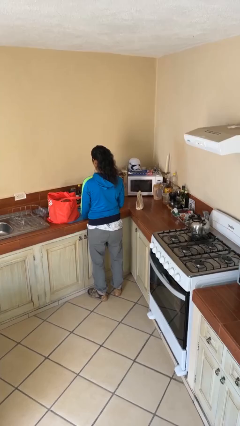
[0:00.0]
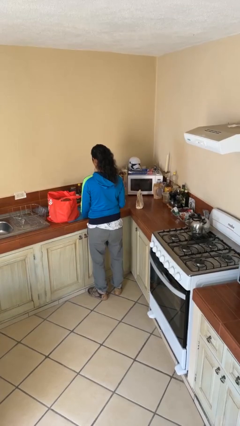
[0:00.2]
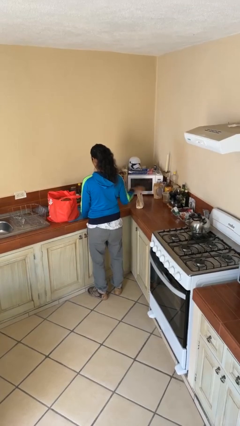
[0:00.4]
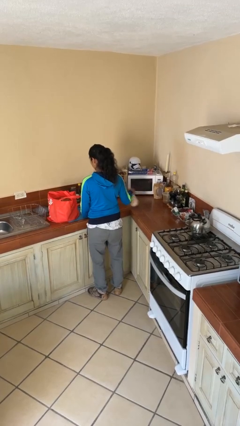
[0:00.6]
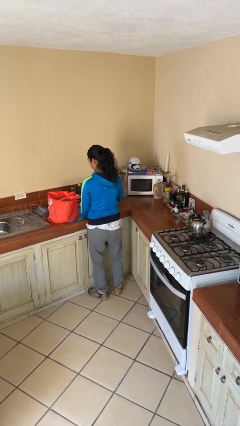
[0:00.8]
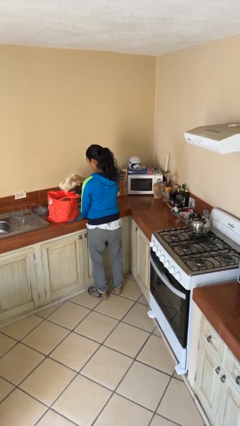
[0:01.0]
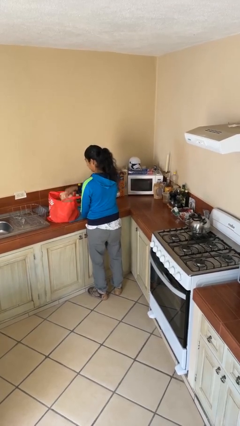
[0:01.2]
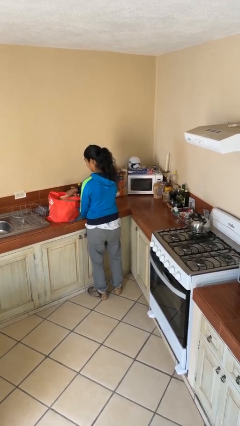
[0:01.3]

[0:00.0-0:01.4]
person puts object into bag

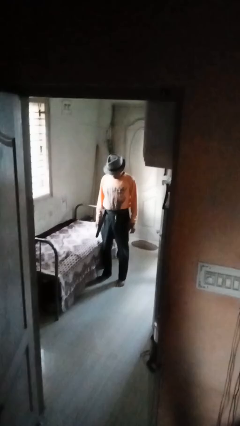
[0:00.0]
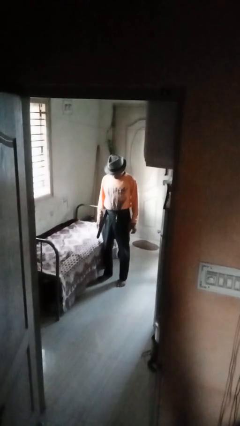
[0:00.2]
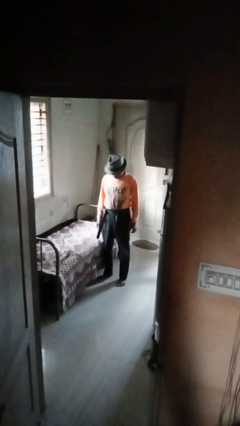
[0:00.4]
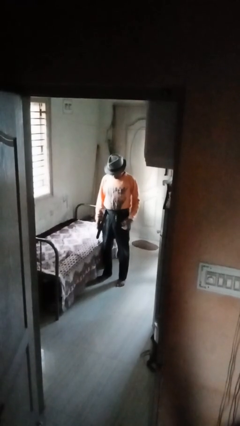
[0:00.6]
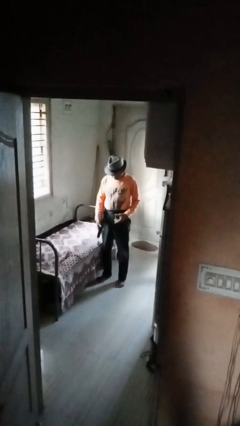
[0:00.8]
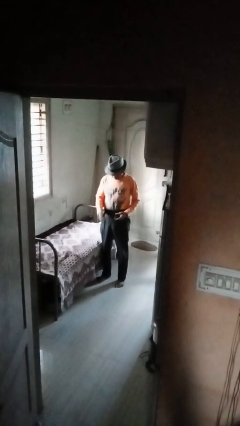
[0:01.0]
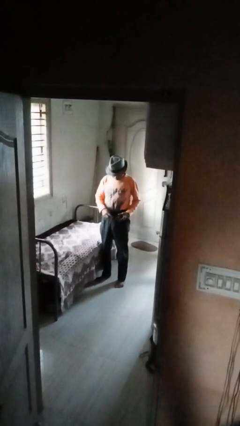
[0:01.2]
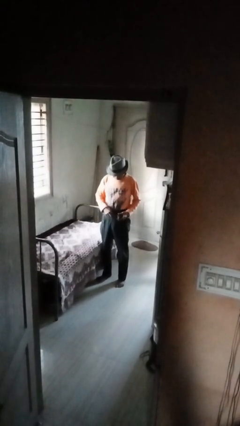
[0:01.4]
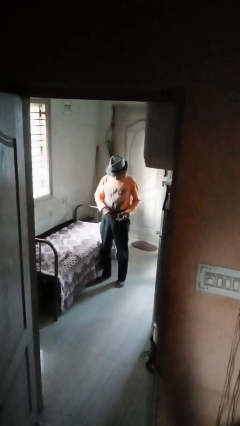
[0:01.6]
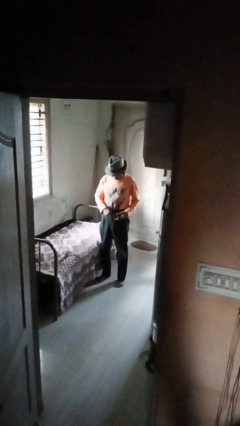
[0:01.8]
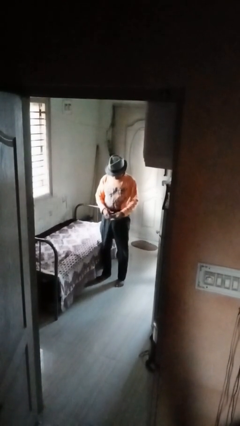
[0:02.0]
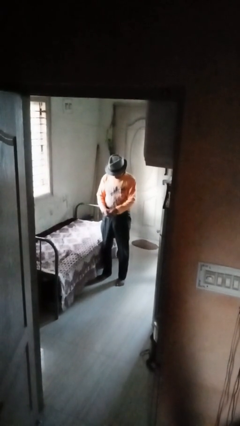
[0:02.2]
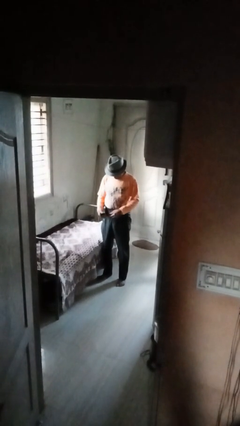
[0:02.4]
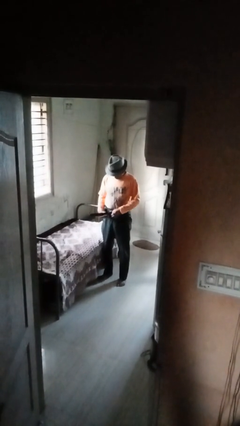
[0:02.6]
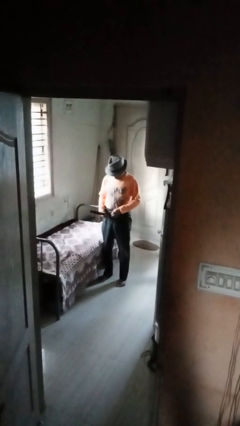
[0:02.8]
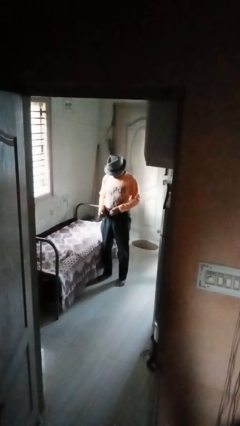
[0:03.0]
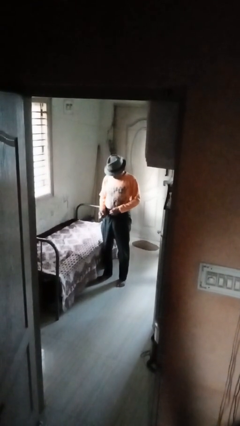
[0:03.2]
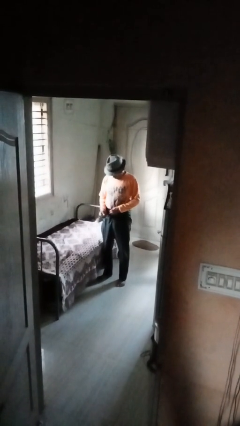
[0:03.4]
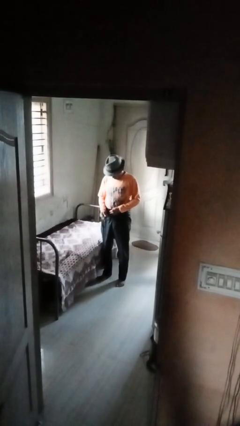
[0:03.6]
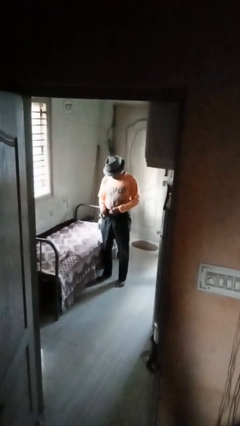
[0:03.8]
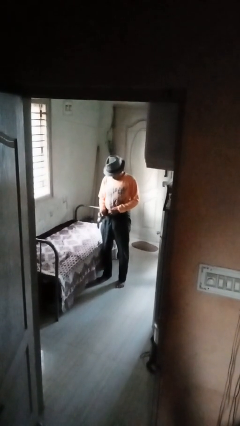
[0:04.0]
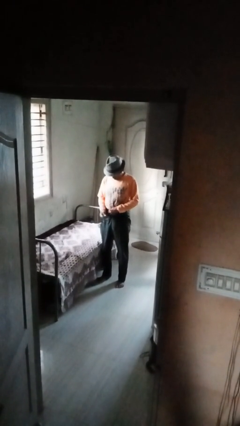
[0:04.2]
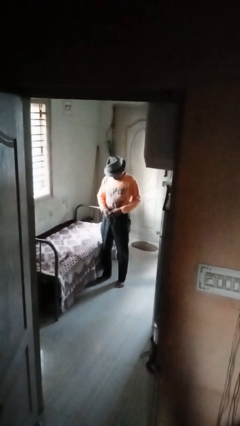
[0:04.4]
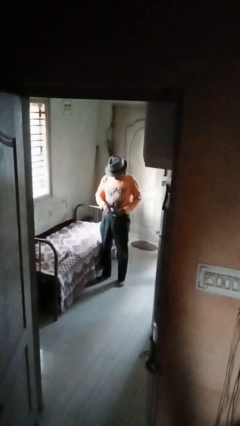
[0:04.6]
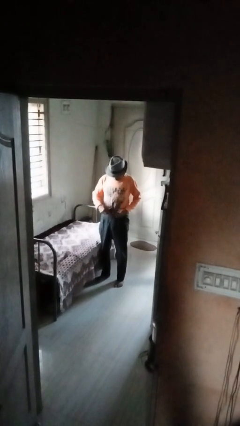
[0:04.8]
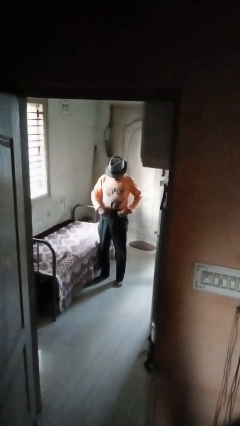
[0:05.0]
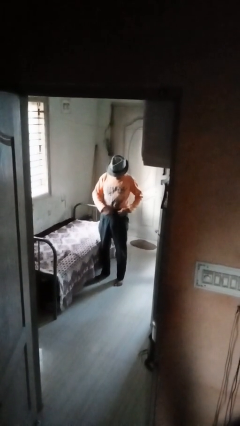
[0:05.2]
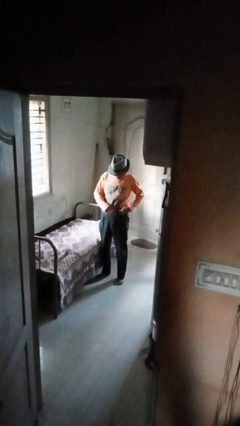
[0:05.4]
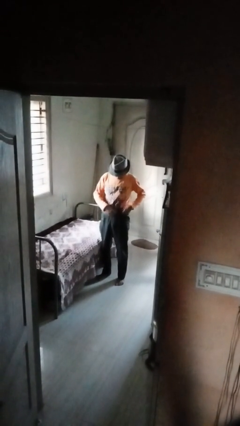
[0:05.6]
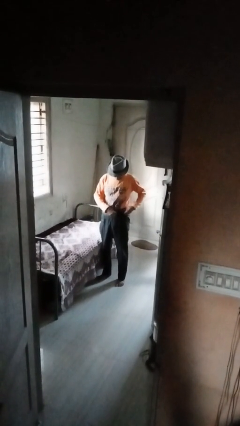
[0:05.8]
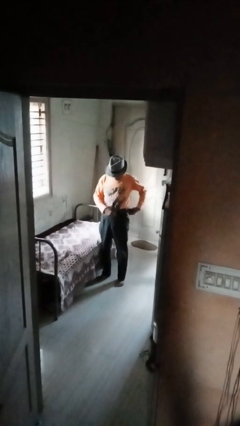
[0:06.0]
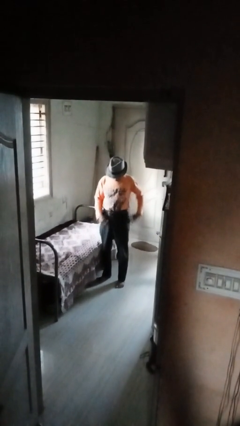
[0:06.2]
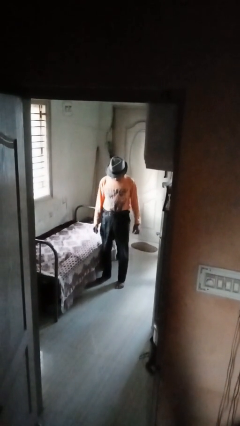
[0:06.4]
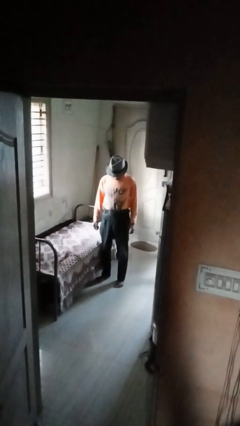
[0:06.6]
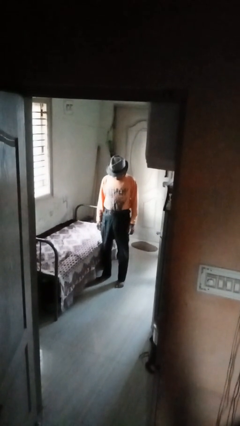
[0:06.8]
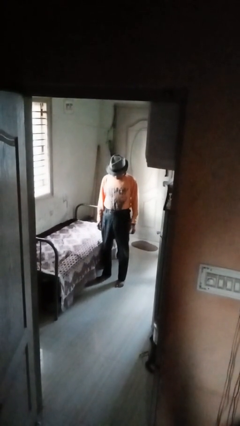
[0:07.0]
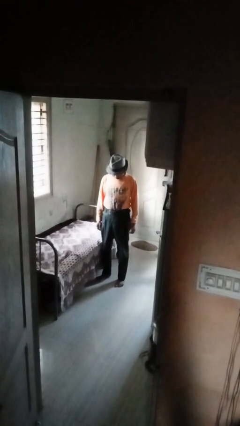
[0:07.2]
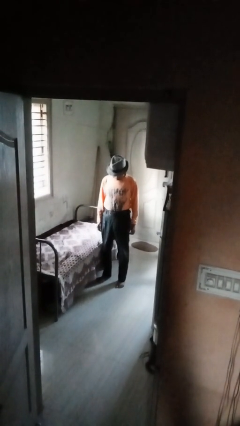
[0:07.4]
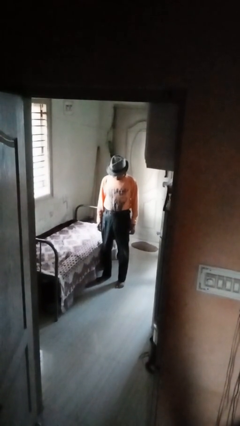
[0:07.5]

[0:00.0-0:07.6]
person puts on belt

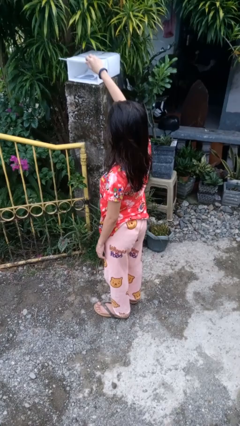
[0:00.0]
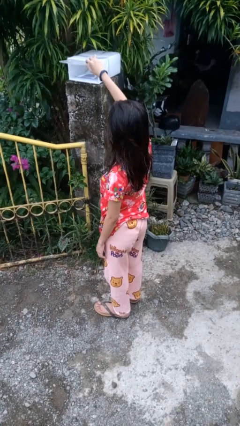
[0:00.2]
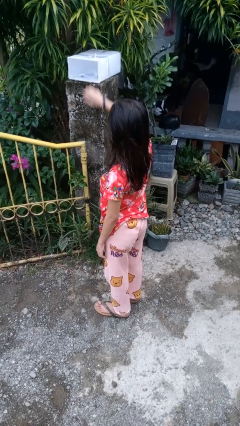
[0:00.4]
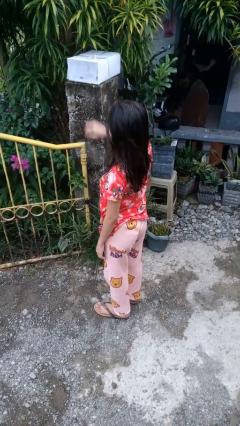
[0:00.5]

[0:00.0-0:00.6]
person closes mailbox

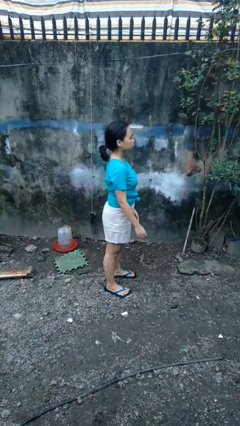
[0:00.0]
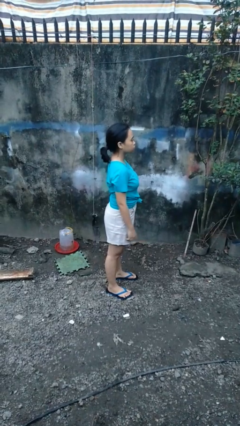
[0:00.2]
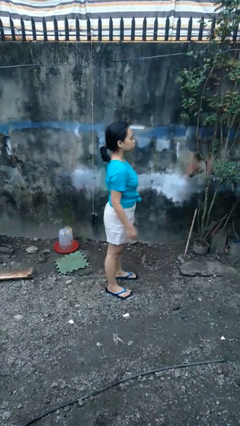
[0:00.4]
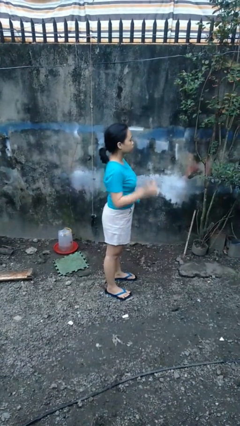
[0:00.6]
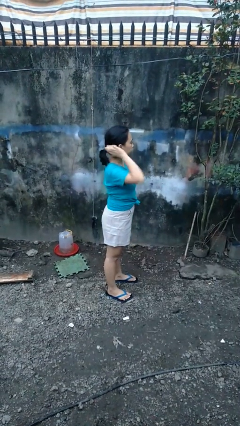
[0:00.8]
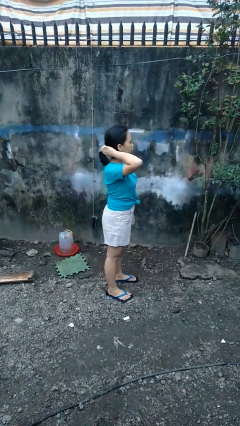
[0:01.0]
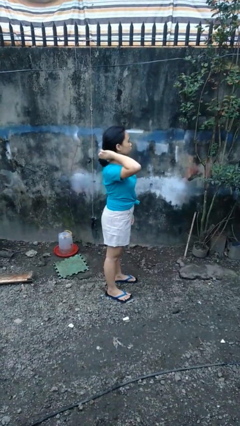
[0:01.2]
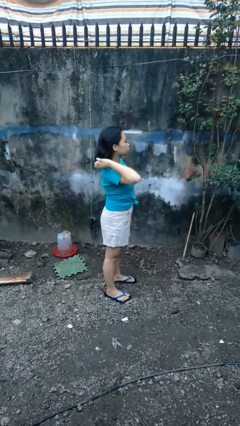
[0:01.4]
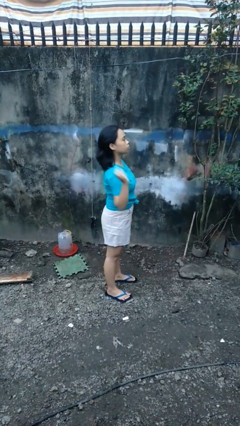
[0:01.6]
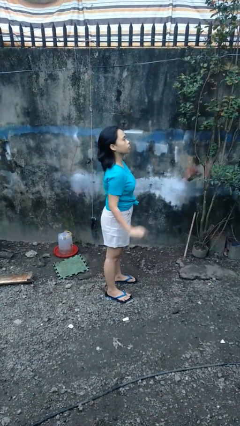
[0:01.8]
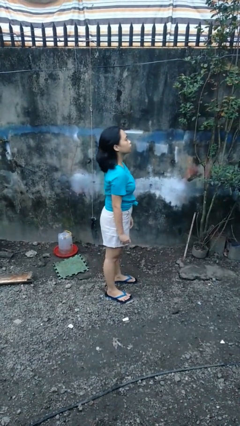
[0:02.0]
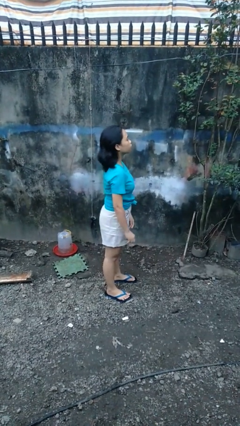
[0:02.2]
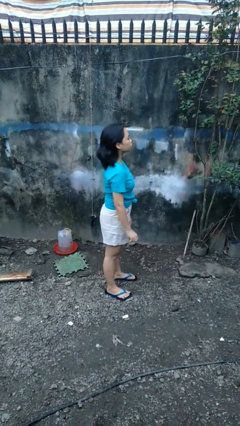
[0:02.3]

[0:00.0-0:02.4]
person takes off hairtie

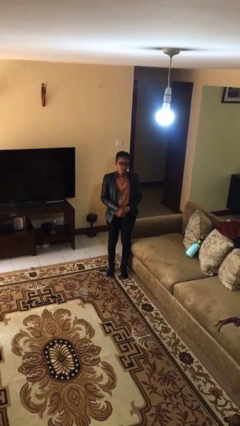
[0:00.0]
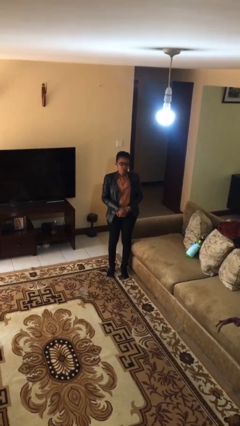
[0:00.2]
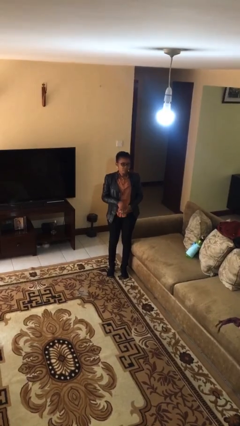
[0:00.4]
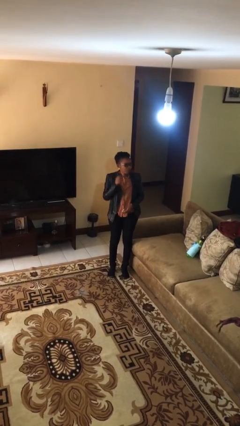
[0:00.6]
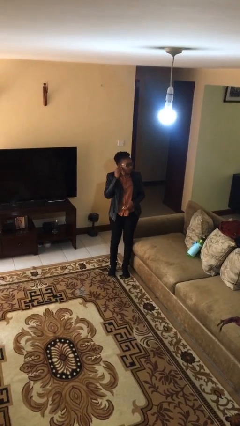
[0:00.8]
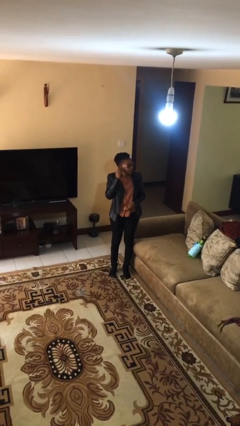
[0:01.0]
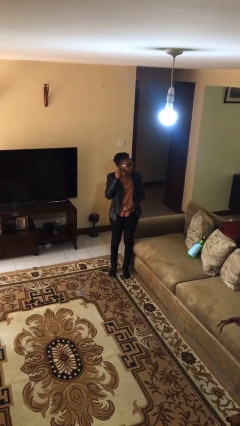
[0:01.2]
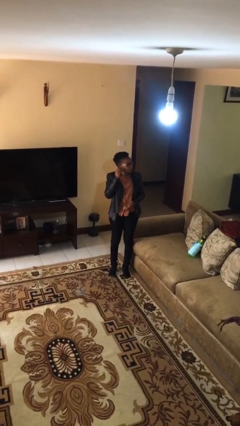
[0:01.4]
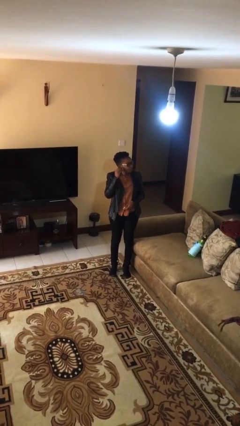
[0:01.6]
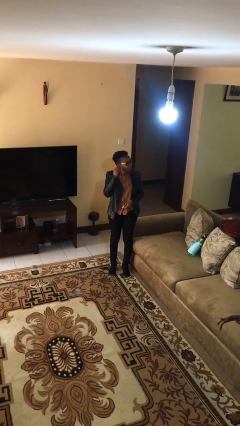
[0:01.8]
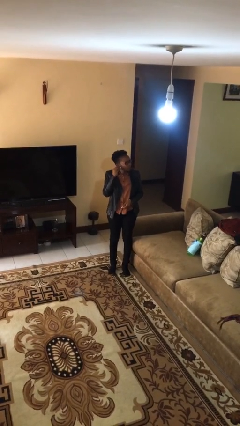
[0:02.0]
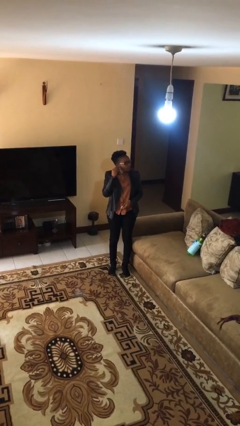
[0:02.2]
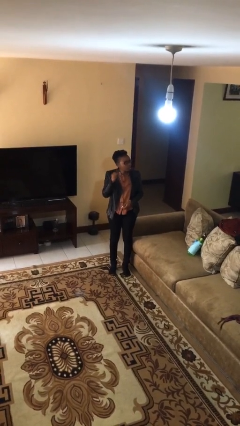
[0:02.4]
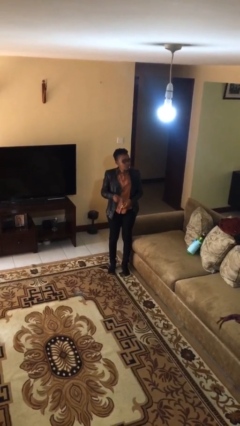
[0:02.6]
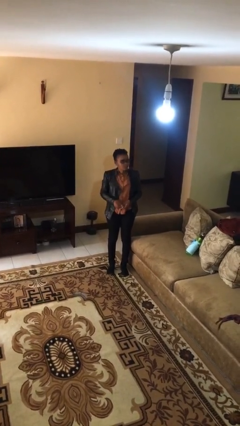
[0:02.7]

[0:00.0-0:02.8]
person takes off earrings

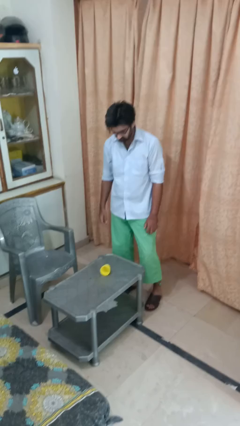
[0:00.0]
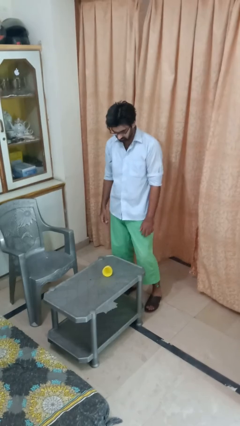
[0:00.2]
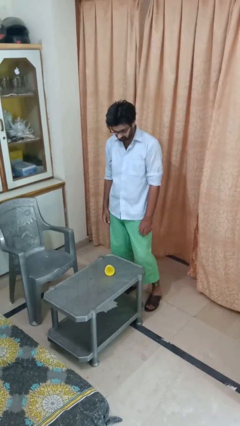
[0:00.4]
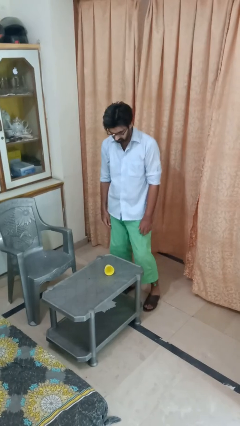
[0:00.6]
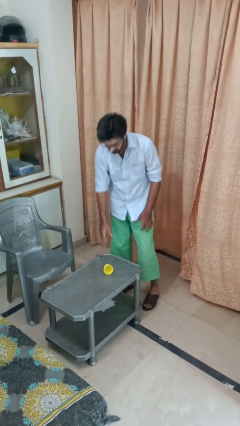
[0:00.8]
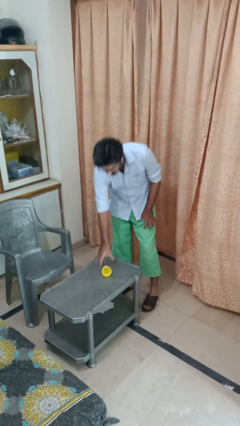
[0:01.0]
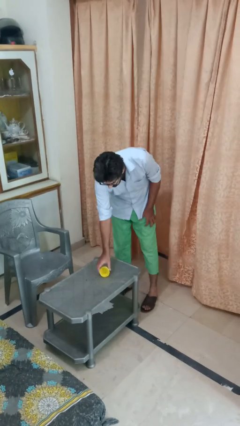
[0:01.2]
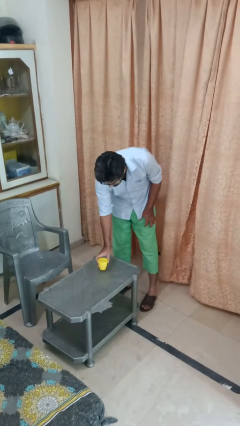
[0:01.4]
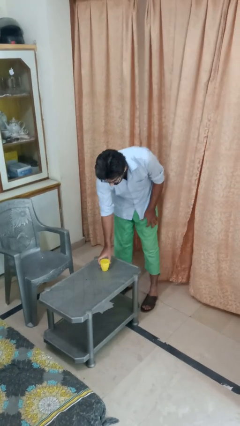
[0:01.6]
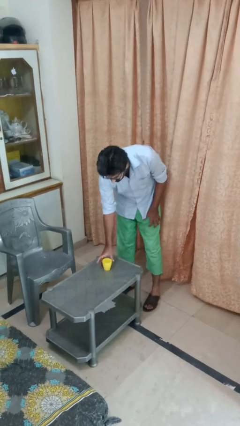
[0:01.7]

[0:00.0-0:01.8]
person sets upright glass

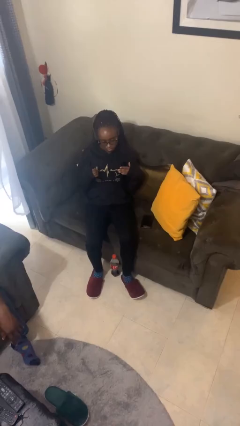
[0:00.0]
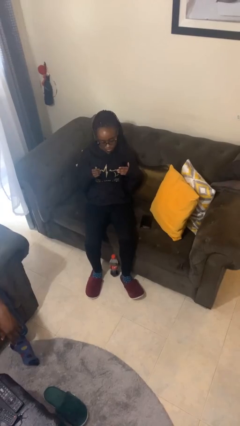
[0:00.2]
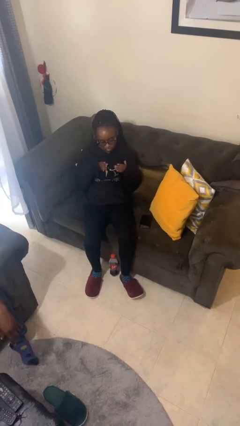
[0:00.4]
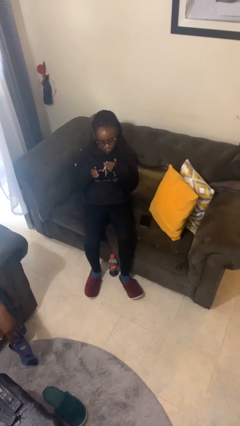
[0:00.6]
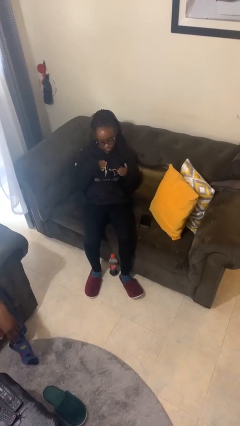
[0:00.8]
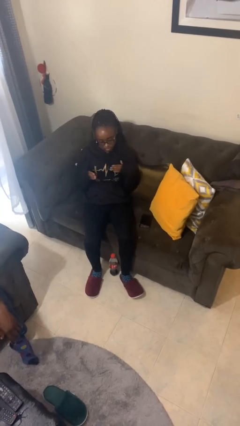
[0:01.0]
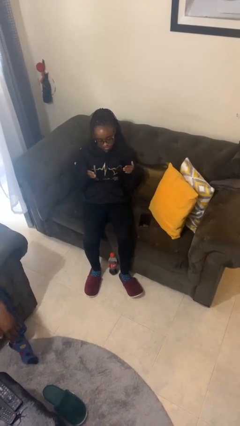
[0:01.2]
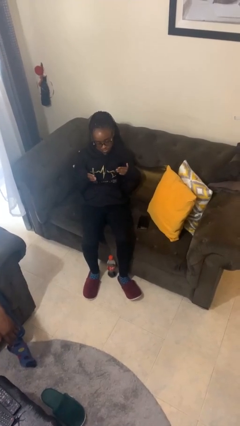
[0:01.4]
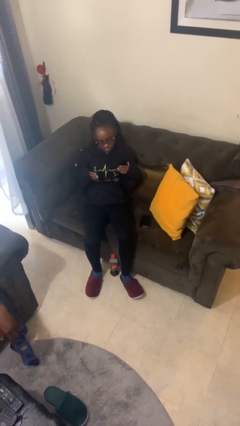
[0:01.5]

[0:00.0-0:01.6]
person drums on chest
